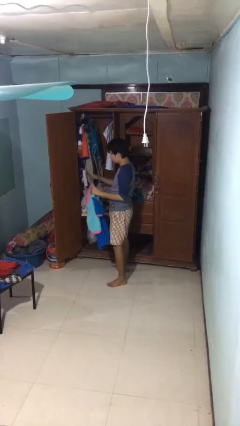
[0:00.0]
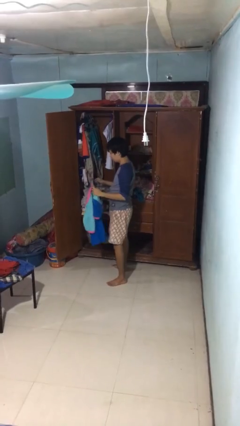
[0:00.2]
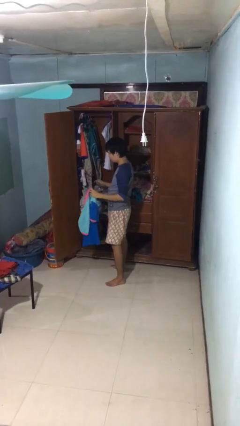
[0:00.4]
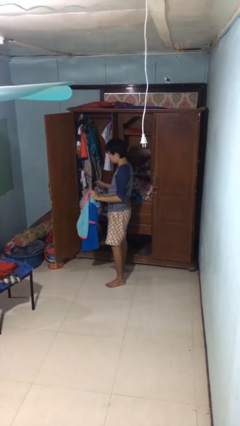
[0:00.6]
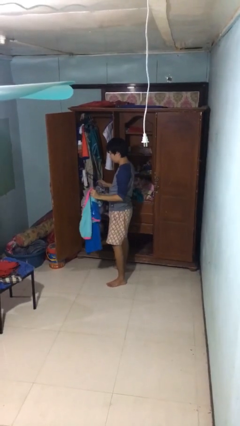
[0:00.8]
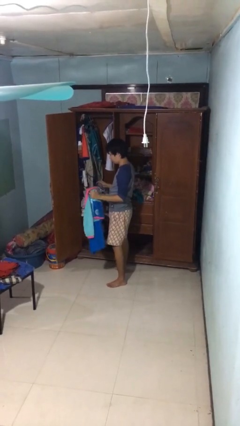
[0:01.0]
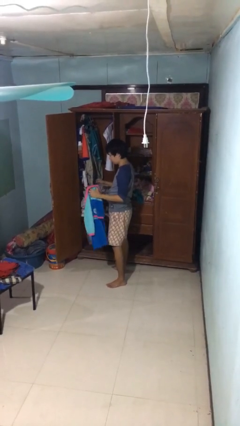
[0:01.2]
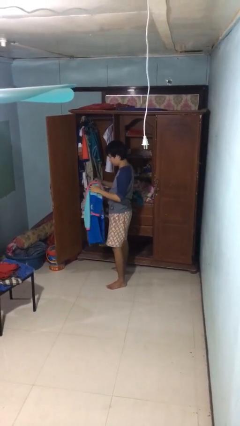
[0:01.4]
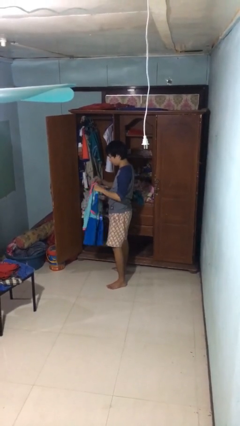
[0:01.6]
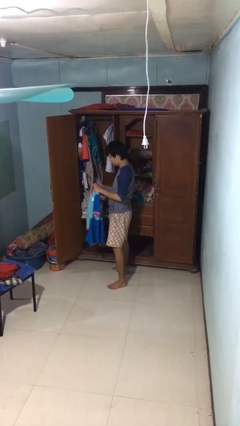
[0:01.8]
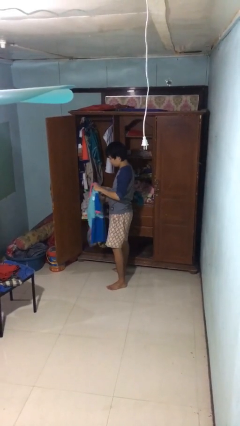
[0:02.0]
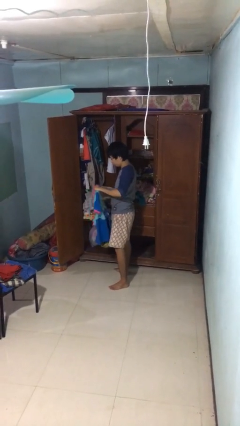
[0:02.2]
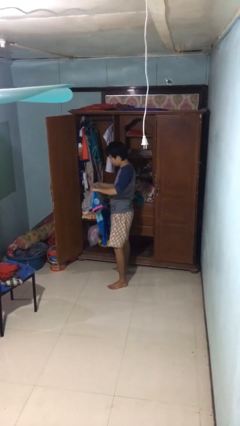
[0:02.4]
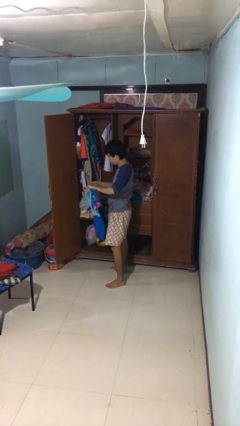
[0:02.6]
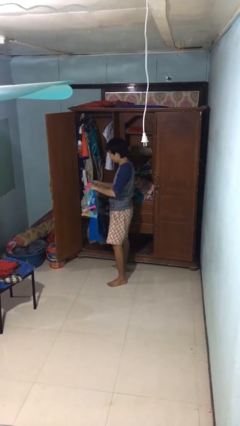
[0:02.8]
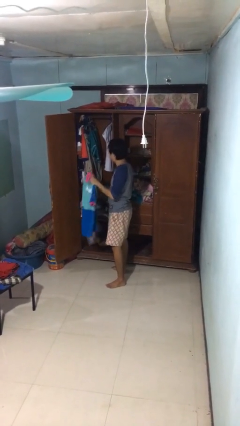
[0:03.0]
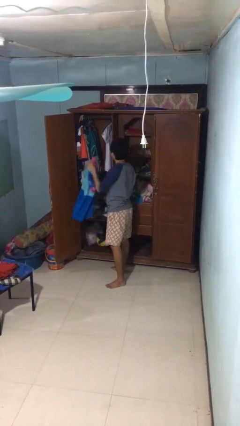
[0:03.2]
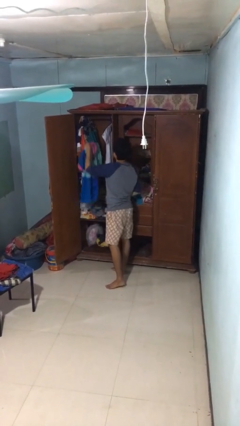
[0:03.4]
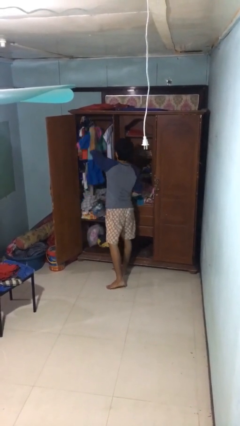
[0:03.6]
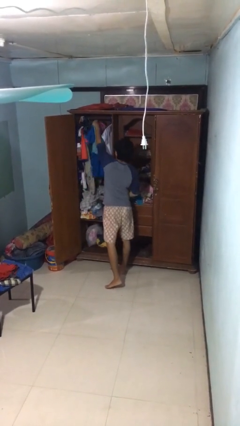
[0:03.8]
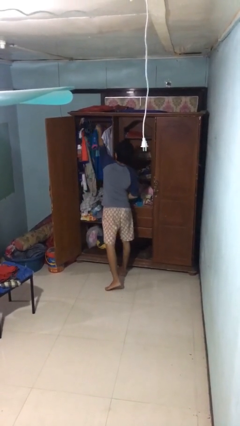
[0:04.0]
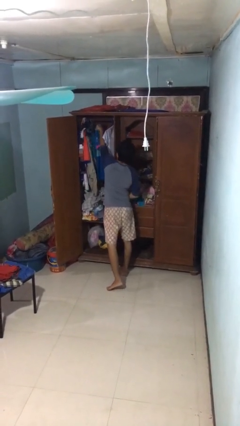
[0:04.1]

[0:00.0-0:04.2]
person puts clothes into closet

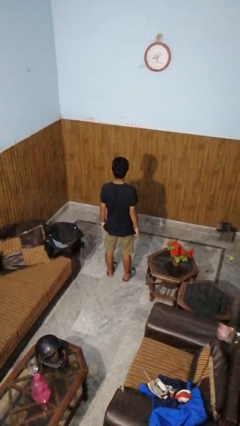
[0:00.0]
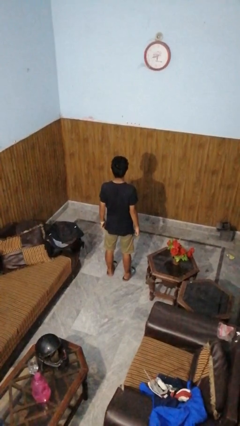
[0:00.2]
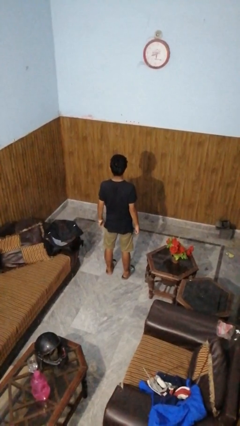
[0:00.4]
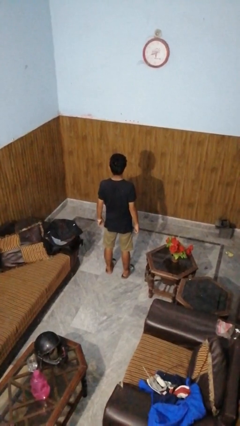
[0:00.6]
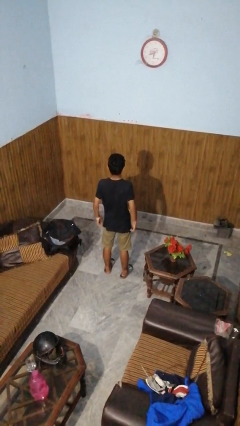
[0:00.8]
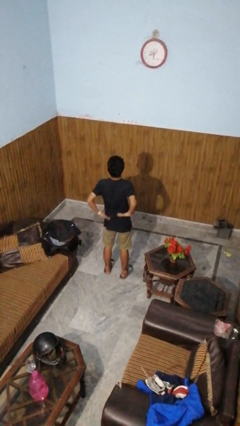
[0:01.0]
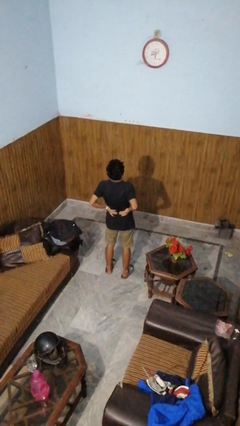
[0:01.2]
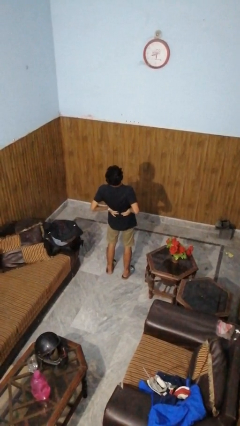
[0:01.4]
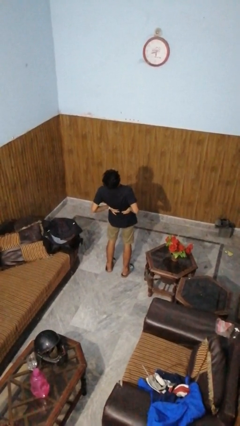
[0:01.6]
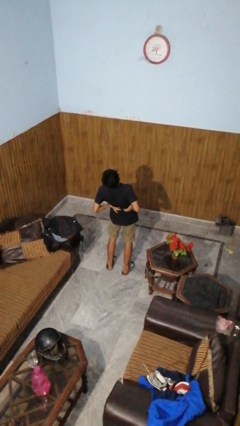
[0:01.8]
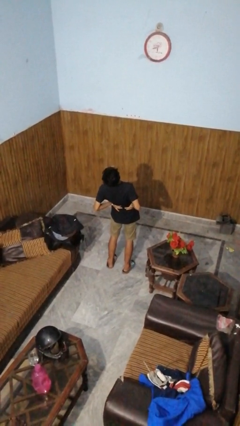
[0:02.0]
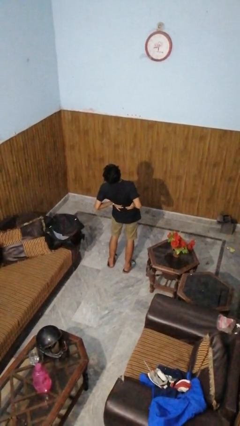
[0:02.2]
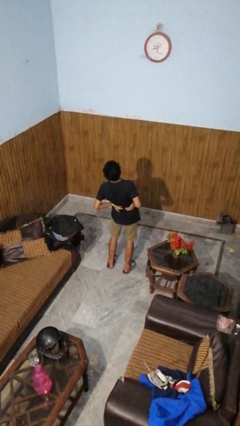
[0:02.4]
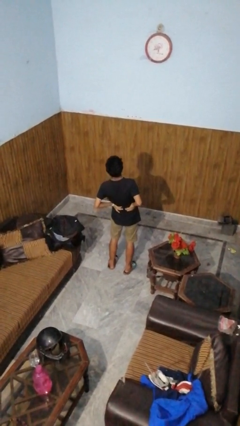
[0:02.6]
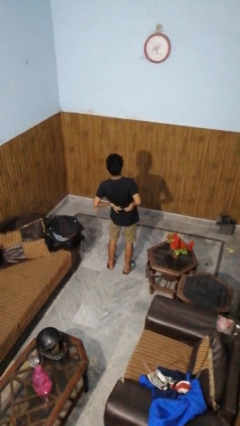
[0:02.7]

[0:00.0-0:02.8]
person stretches back

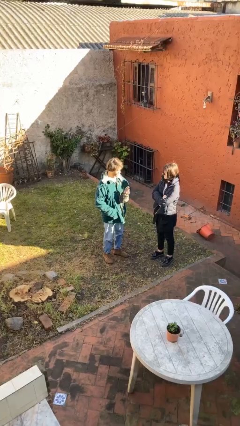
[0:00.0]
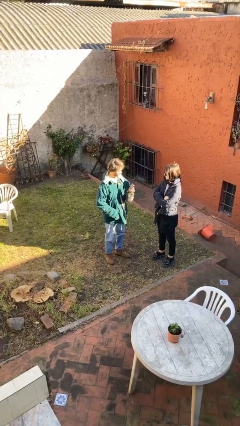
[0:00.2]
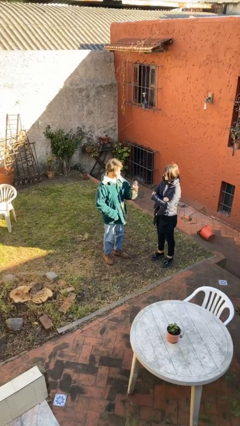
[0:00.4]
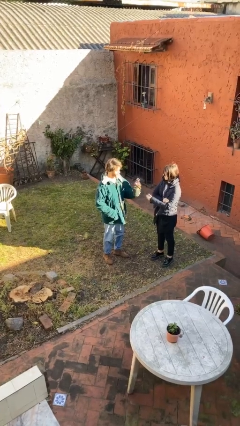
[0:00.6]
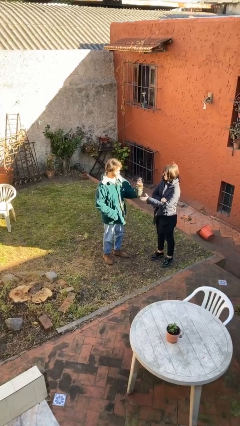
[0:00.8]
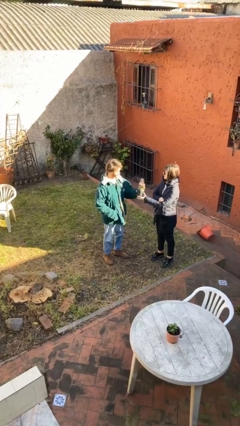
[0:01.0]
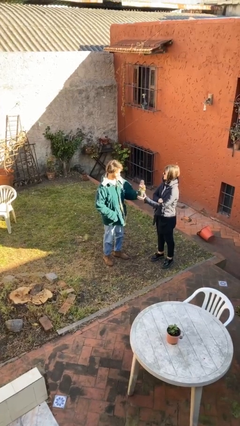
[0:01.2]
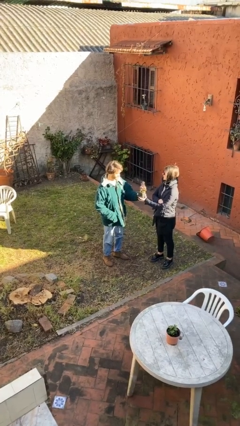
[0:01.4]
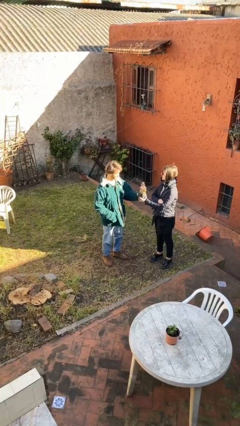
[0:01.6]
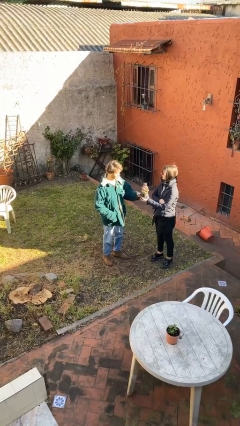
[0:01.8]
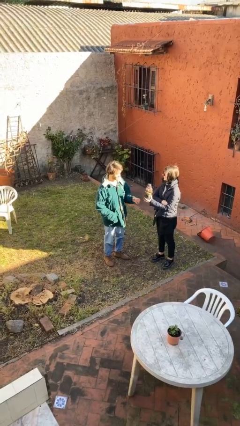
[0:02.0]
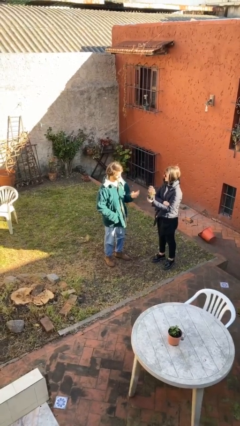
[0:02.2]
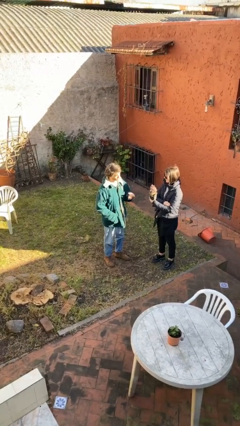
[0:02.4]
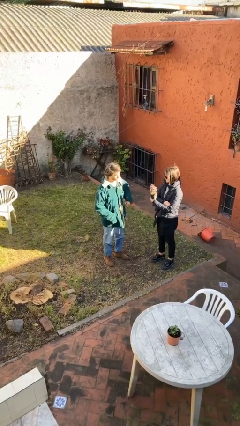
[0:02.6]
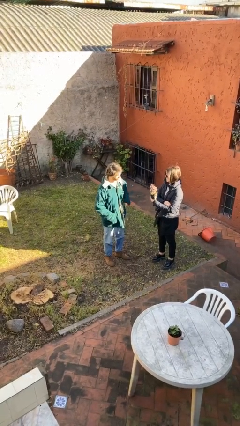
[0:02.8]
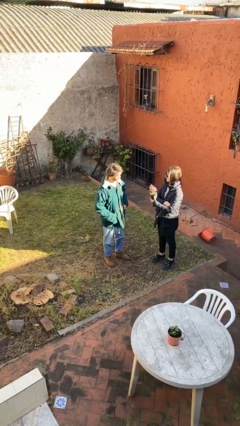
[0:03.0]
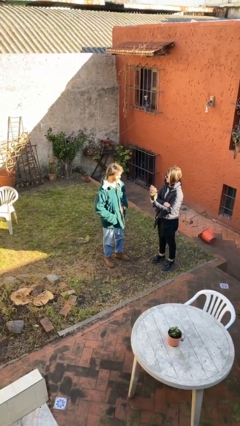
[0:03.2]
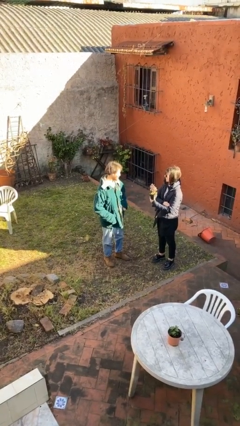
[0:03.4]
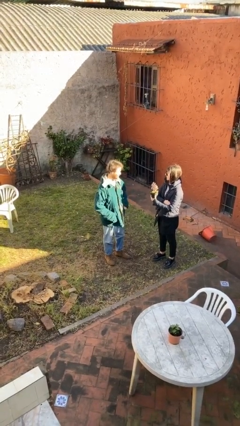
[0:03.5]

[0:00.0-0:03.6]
person transfers object to person

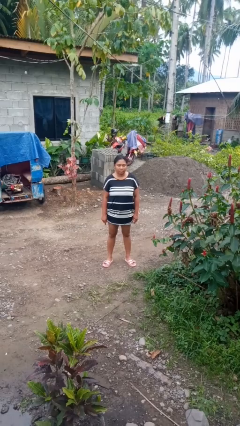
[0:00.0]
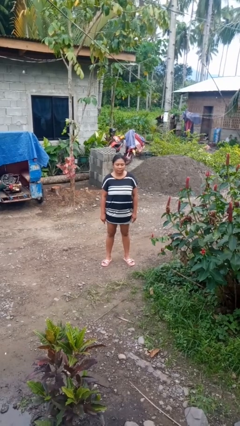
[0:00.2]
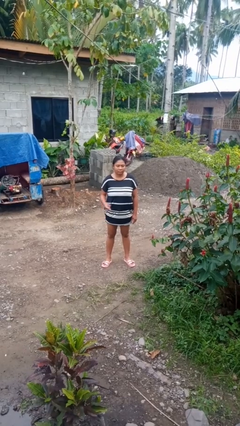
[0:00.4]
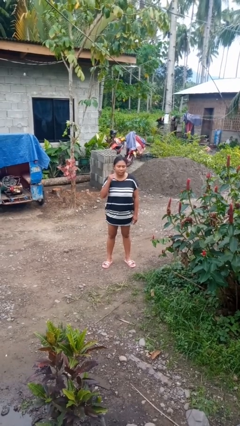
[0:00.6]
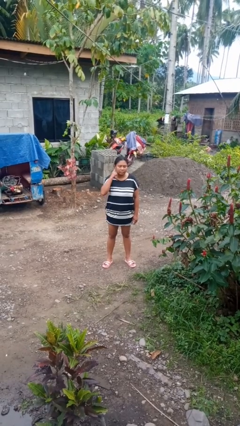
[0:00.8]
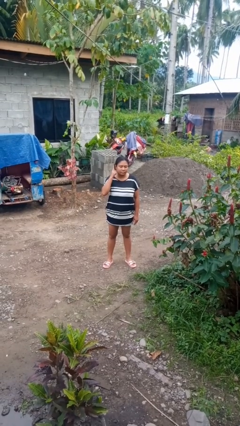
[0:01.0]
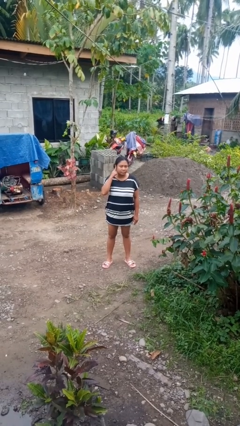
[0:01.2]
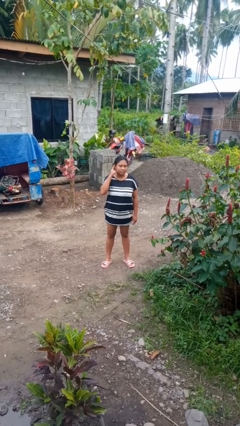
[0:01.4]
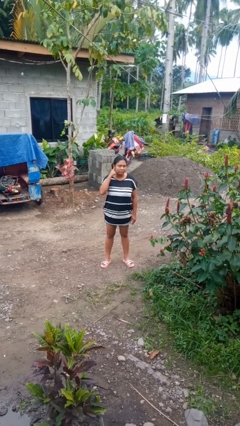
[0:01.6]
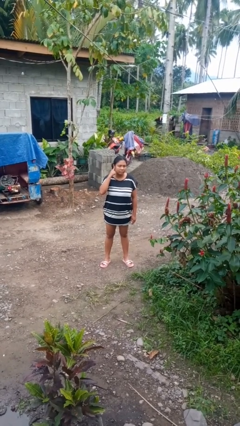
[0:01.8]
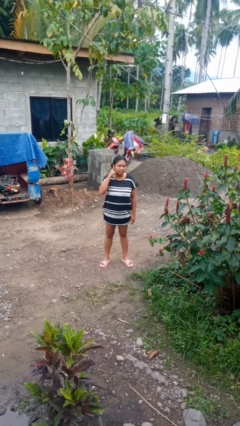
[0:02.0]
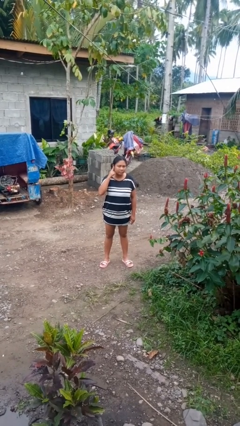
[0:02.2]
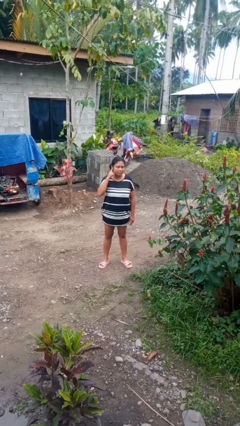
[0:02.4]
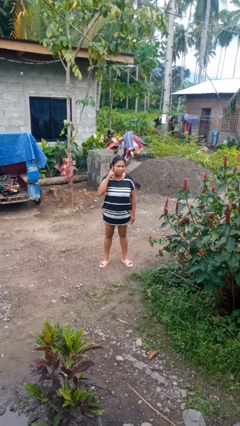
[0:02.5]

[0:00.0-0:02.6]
person gestures listen closely

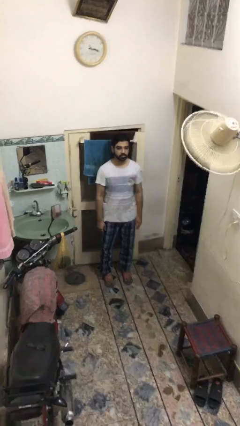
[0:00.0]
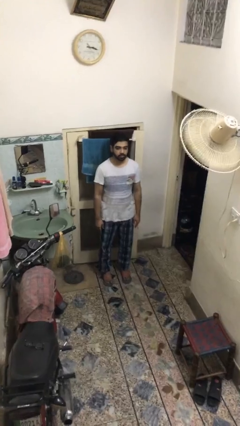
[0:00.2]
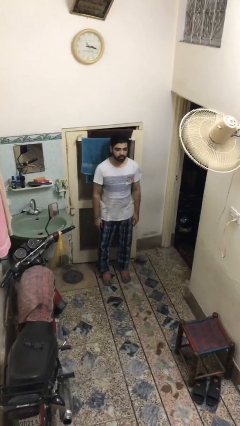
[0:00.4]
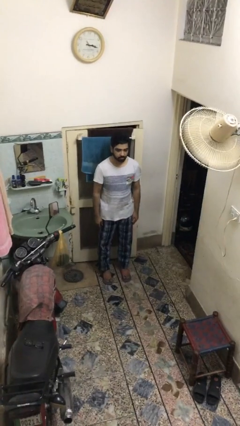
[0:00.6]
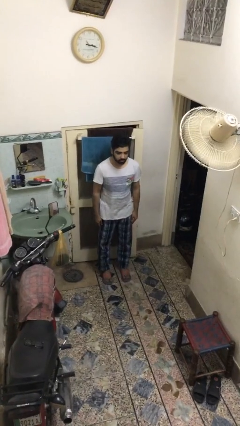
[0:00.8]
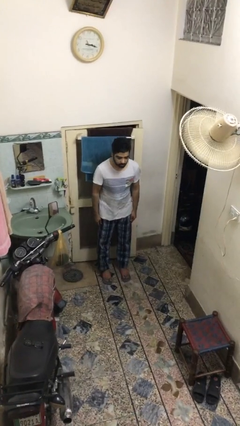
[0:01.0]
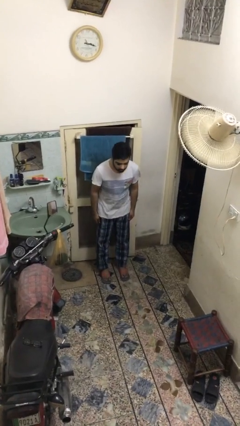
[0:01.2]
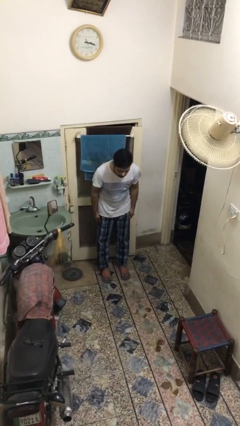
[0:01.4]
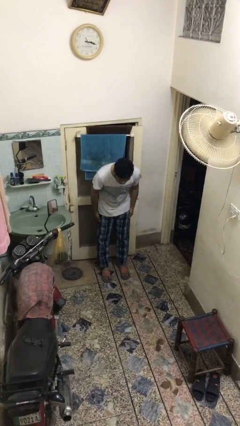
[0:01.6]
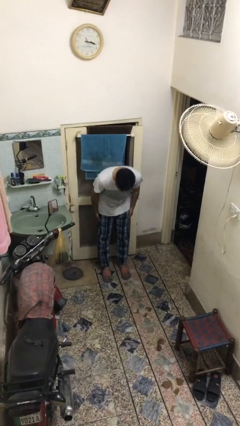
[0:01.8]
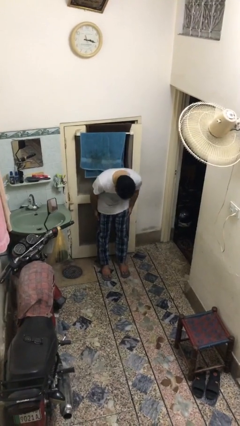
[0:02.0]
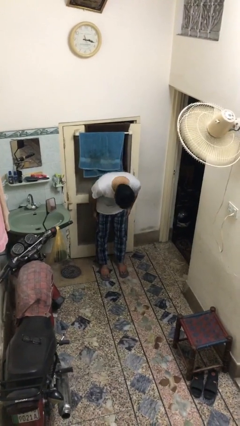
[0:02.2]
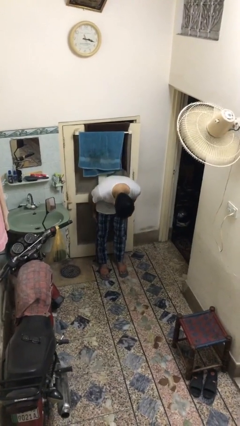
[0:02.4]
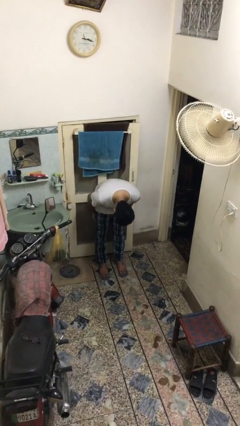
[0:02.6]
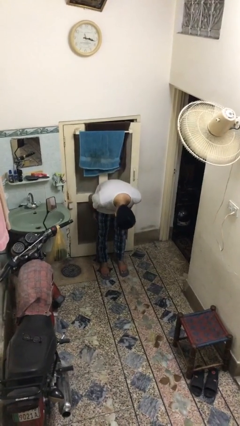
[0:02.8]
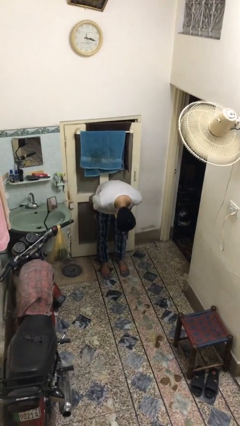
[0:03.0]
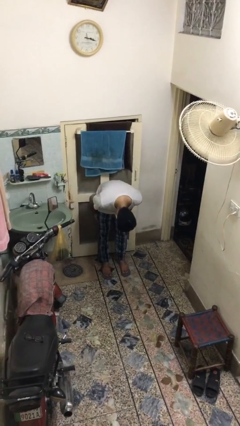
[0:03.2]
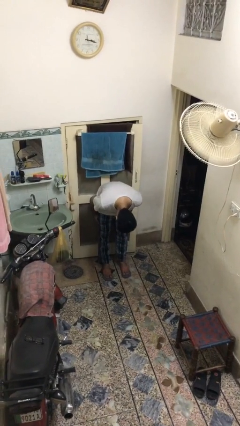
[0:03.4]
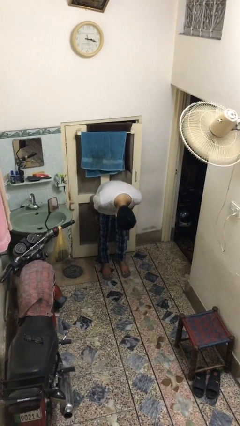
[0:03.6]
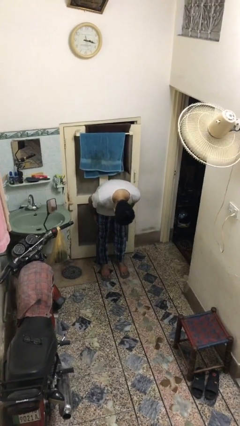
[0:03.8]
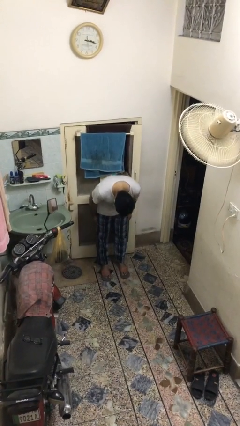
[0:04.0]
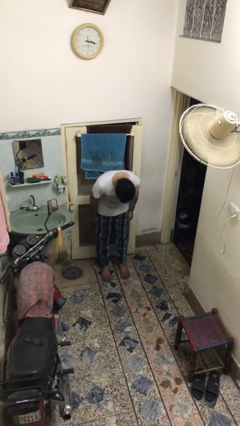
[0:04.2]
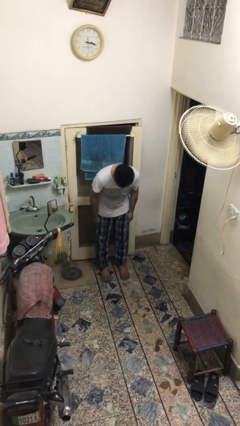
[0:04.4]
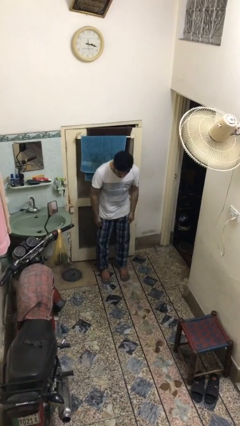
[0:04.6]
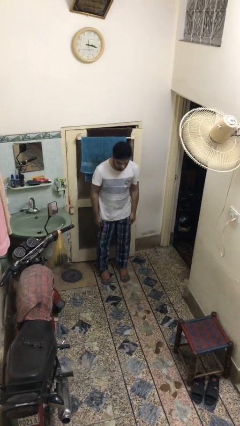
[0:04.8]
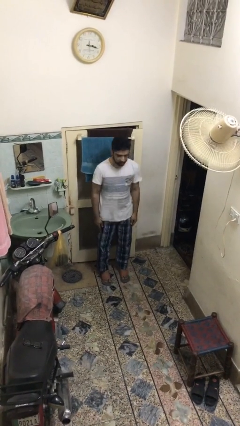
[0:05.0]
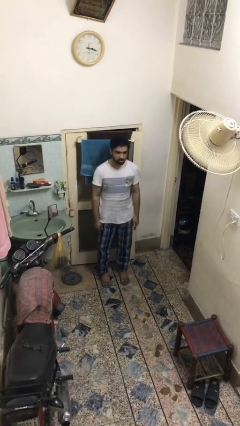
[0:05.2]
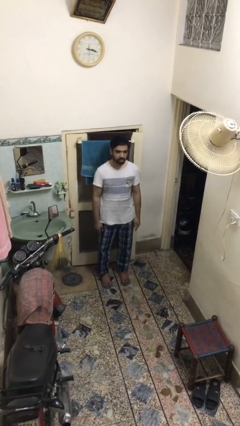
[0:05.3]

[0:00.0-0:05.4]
person bows
